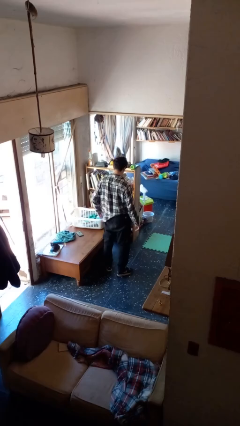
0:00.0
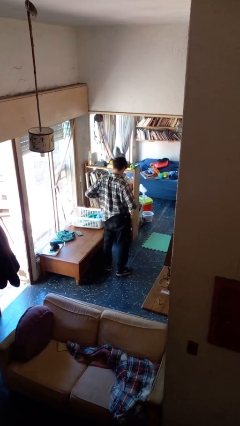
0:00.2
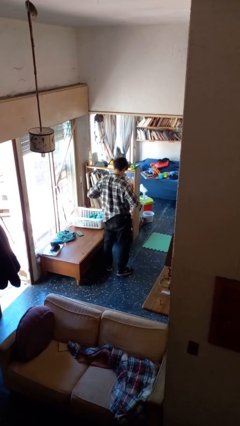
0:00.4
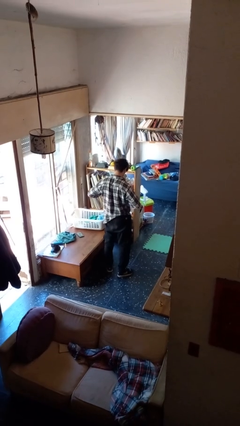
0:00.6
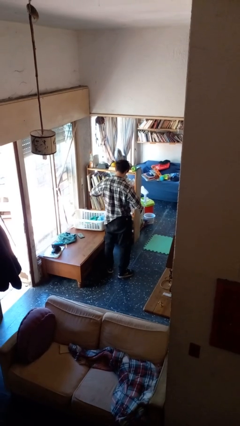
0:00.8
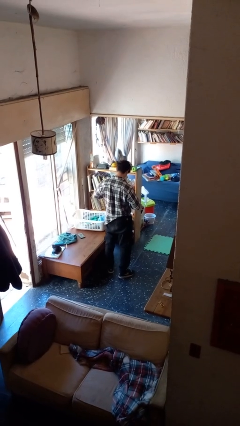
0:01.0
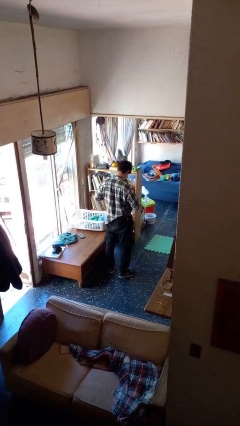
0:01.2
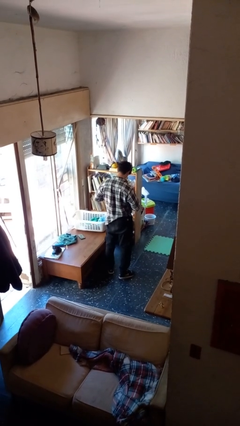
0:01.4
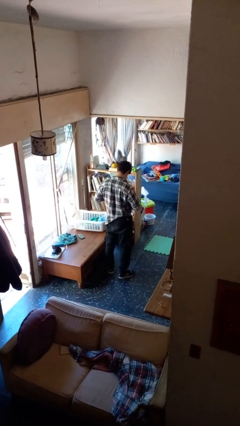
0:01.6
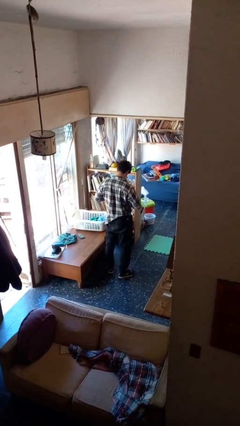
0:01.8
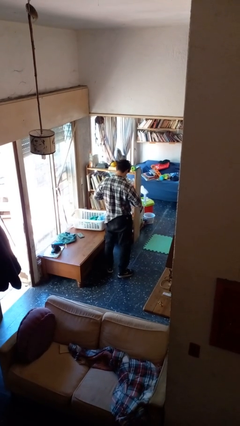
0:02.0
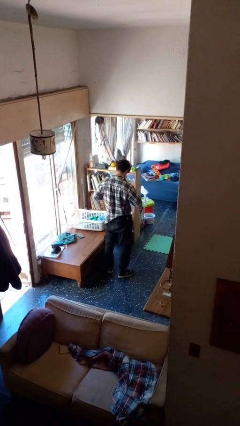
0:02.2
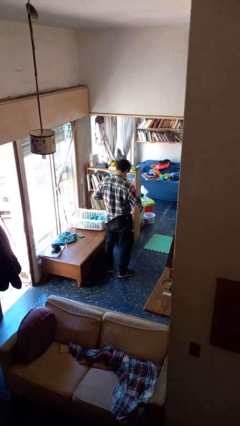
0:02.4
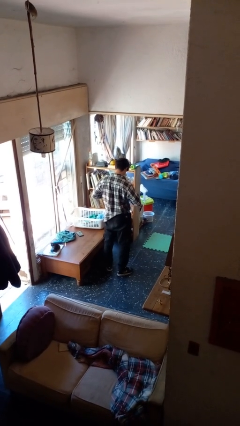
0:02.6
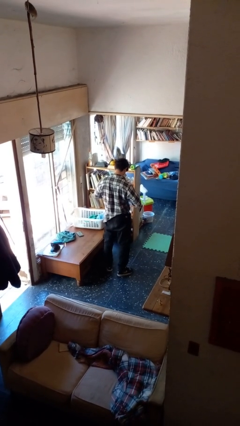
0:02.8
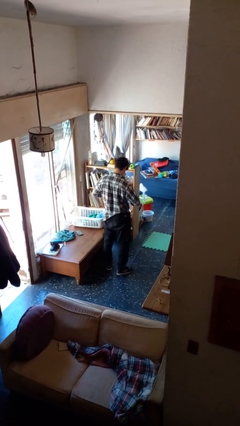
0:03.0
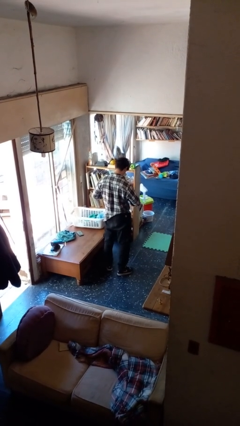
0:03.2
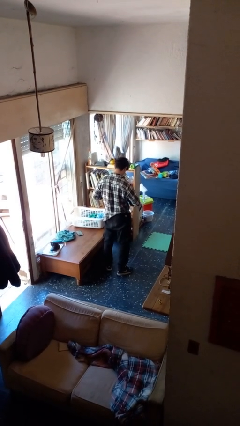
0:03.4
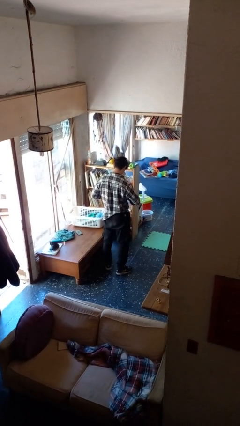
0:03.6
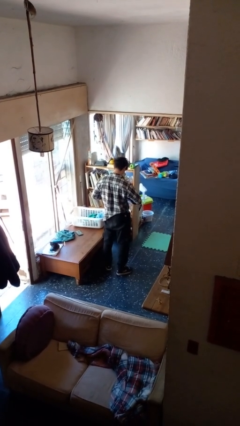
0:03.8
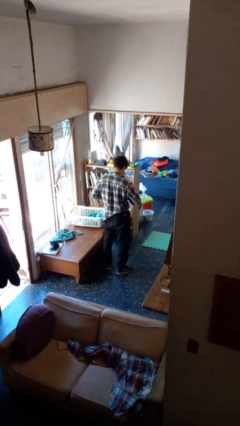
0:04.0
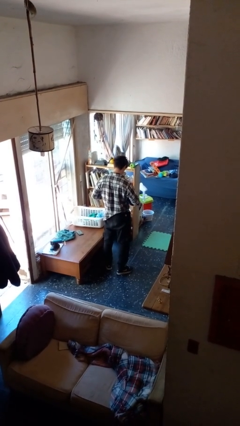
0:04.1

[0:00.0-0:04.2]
person buttons shirt

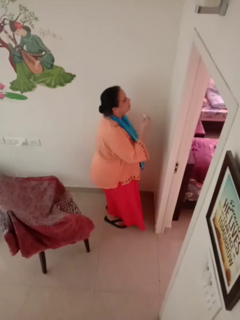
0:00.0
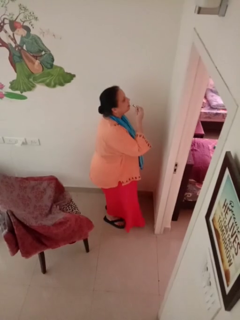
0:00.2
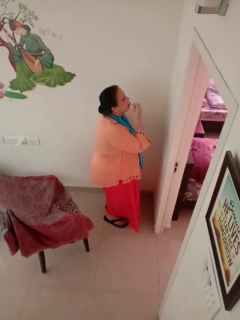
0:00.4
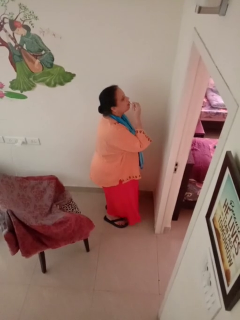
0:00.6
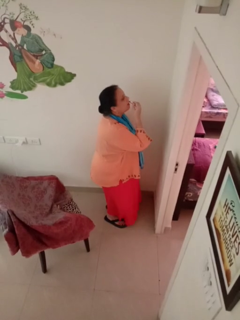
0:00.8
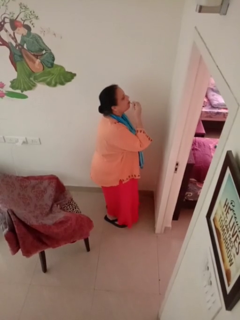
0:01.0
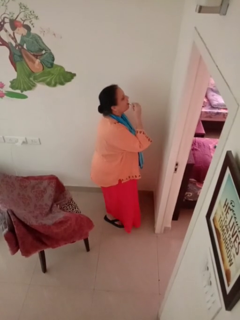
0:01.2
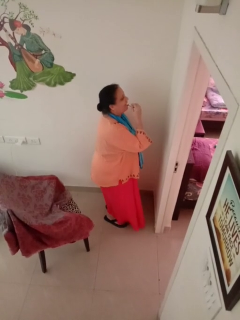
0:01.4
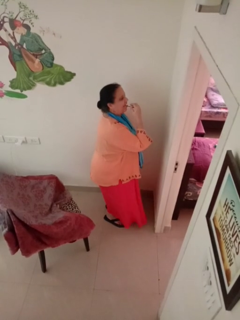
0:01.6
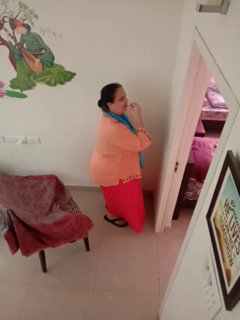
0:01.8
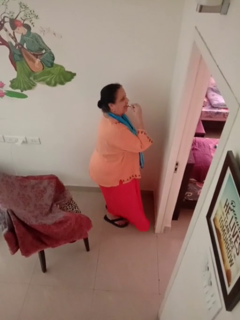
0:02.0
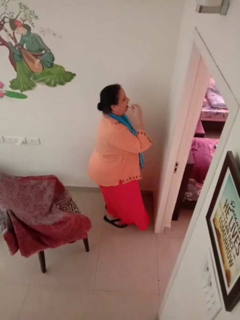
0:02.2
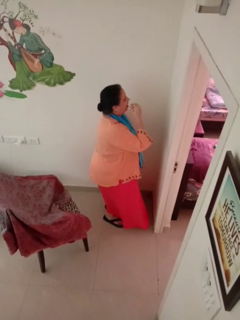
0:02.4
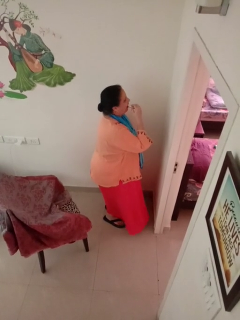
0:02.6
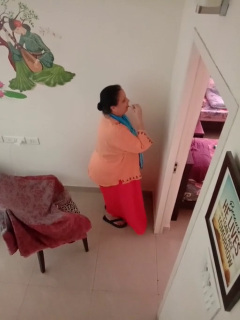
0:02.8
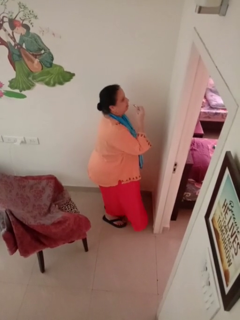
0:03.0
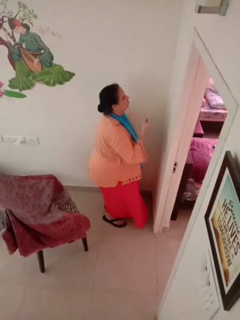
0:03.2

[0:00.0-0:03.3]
person applies lip makeup

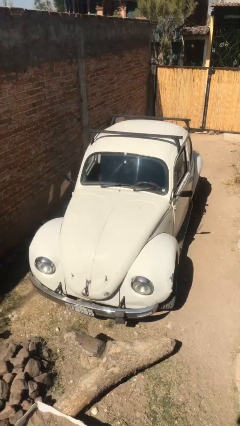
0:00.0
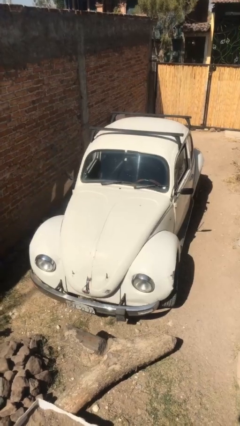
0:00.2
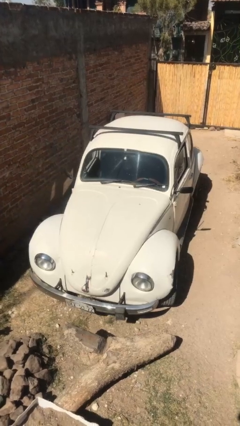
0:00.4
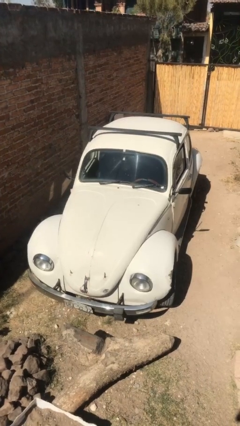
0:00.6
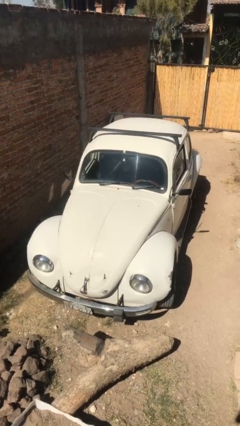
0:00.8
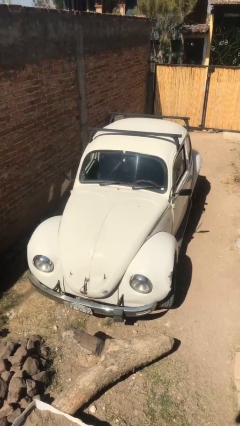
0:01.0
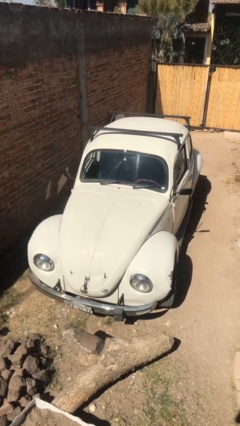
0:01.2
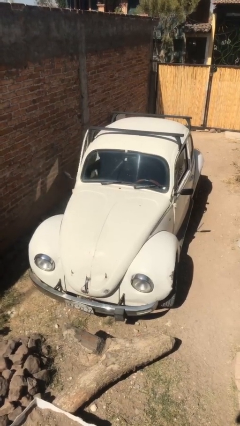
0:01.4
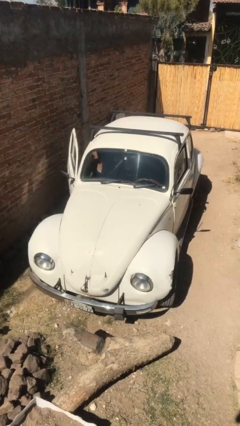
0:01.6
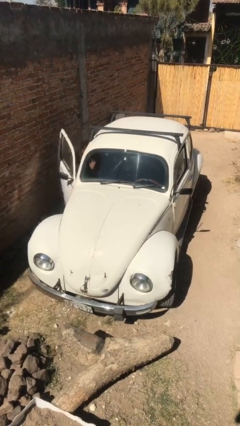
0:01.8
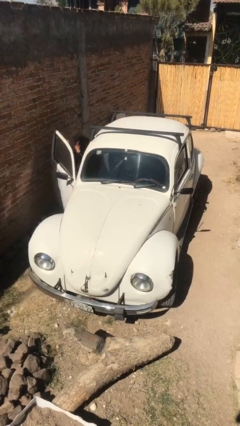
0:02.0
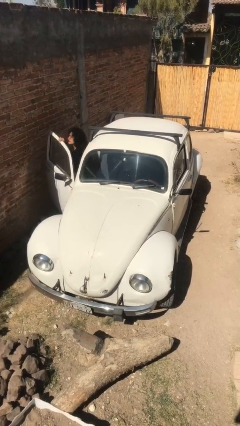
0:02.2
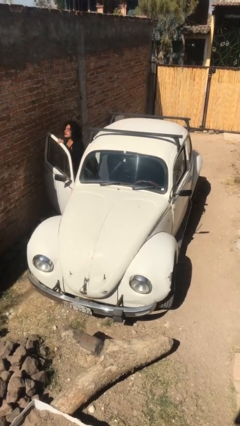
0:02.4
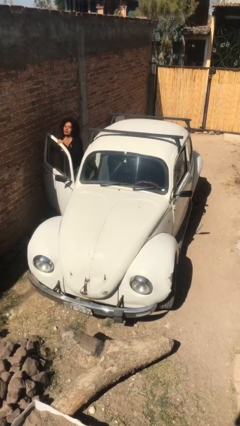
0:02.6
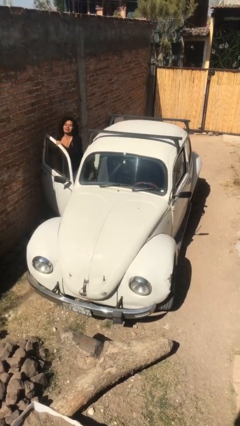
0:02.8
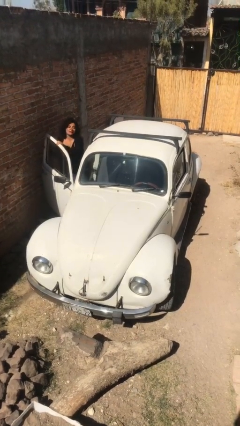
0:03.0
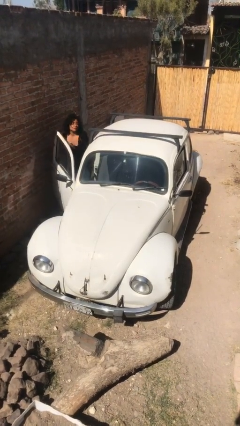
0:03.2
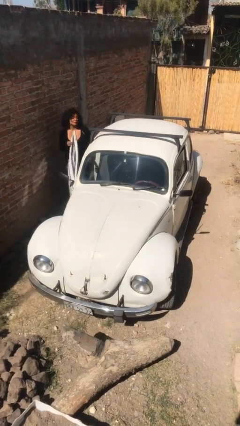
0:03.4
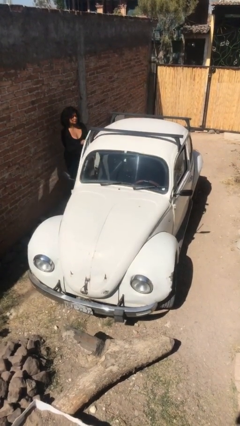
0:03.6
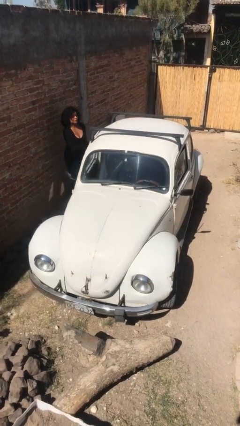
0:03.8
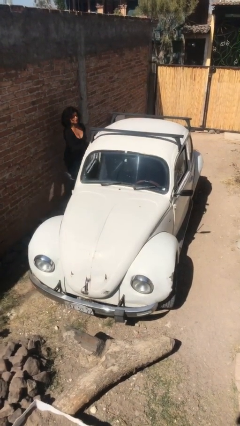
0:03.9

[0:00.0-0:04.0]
car drops off person

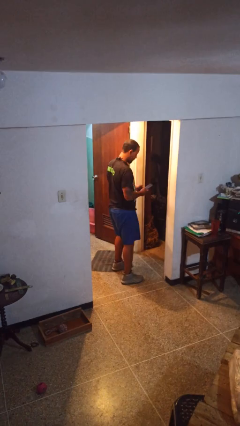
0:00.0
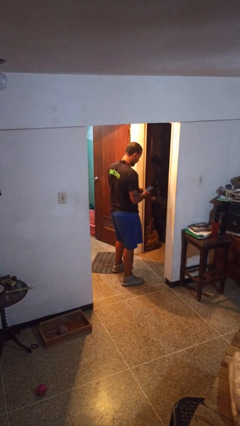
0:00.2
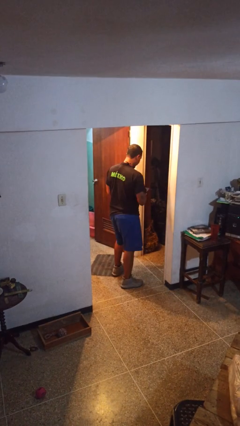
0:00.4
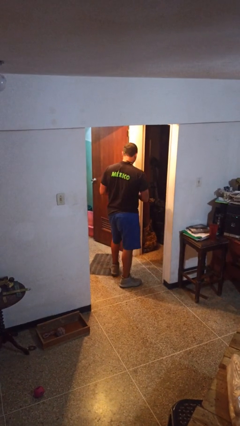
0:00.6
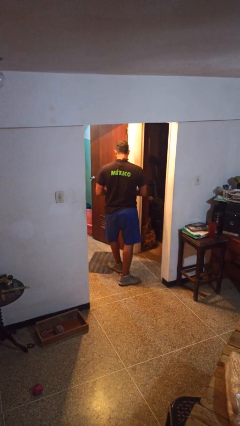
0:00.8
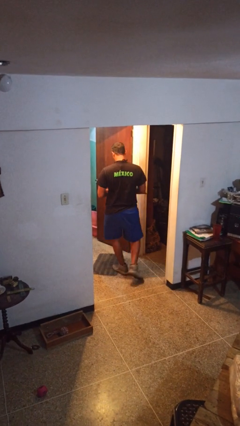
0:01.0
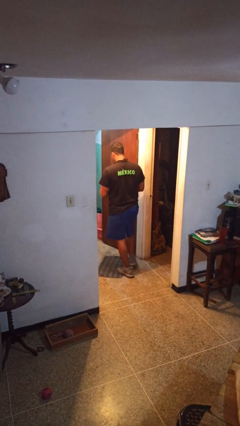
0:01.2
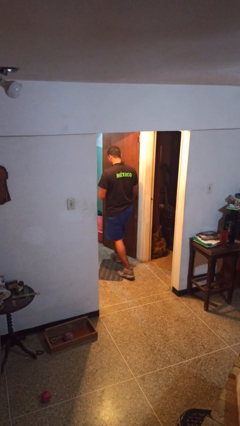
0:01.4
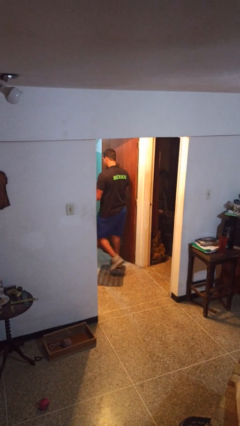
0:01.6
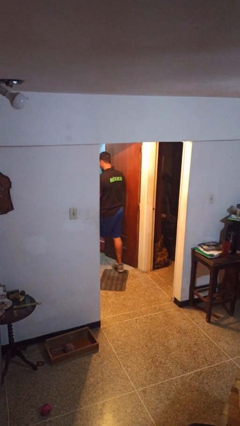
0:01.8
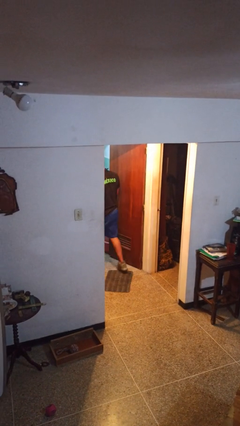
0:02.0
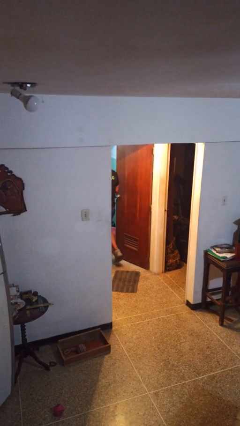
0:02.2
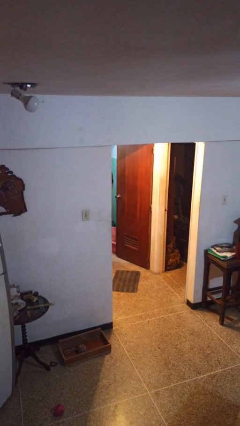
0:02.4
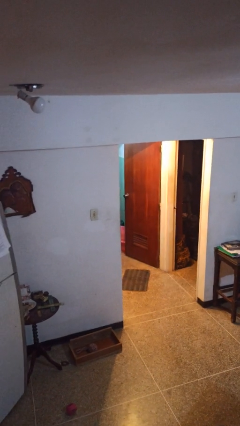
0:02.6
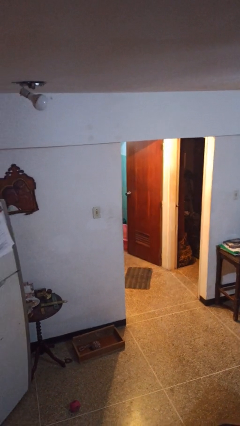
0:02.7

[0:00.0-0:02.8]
person exits scene through structure

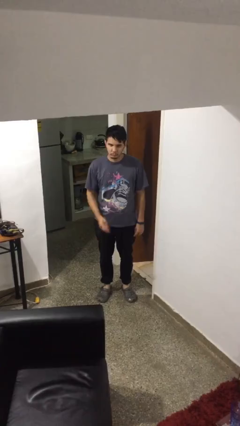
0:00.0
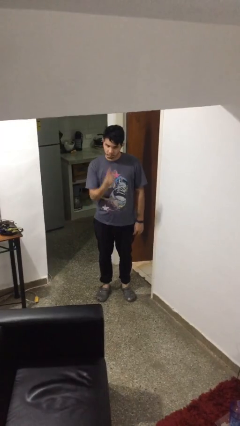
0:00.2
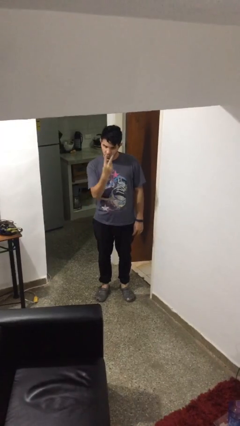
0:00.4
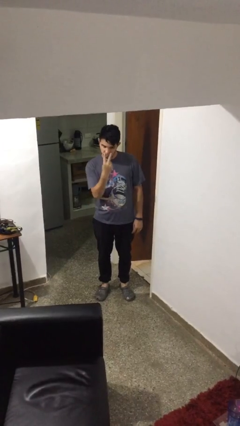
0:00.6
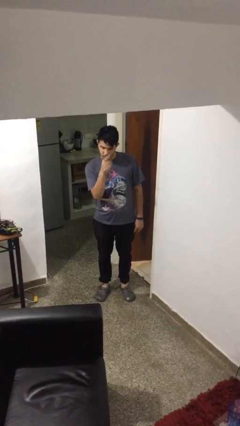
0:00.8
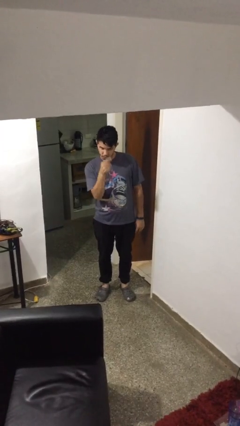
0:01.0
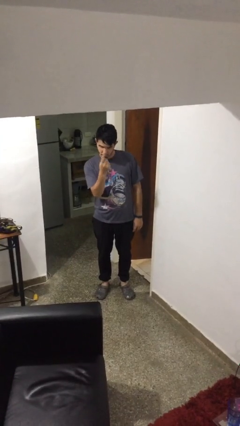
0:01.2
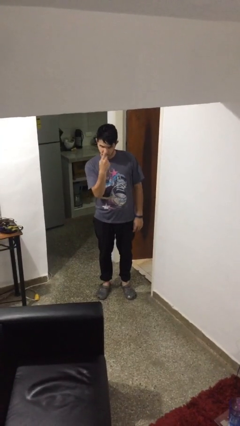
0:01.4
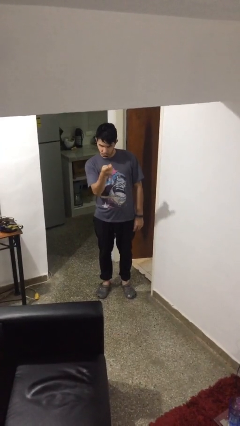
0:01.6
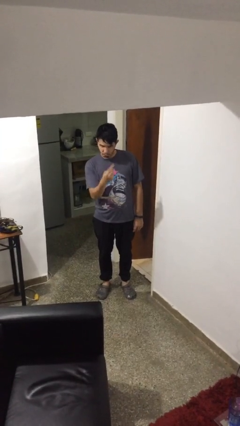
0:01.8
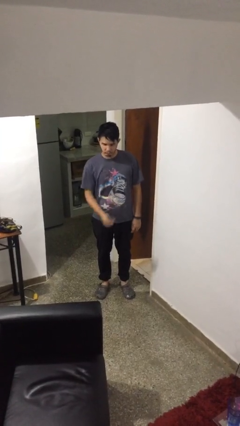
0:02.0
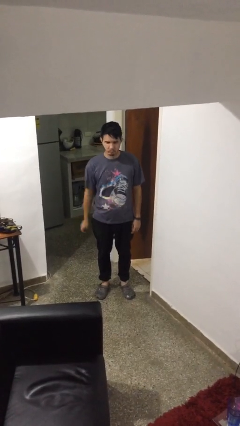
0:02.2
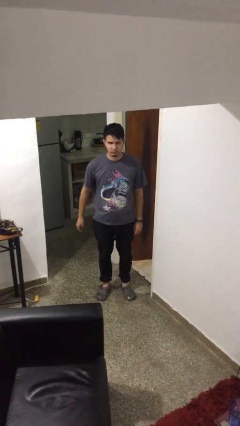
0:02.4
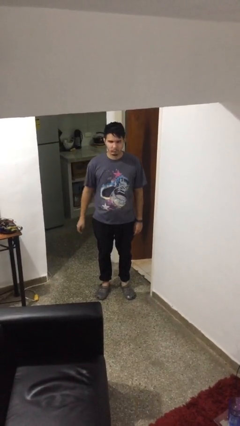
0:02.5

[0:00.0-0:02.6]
person gestures watch closely

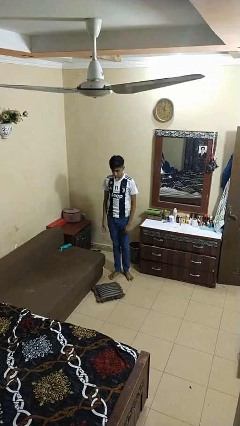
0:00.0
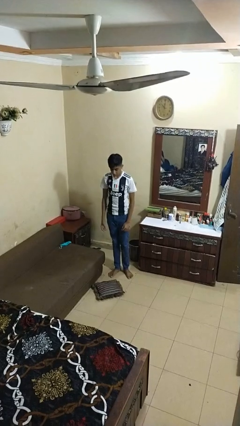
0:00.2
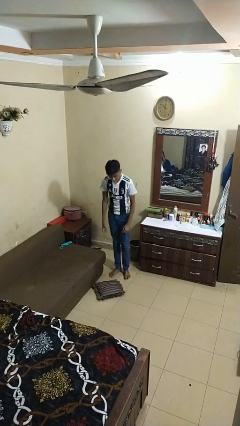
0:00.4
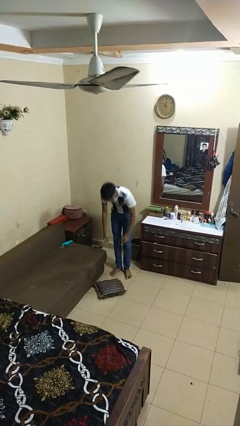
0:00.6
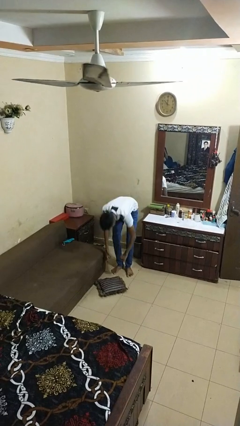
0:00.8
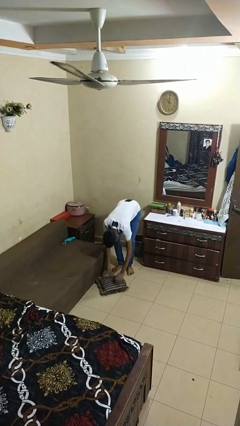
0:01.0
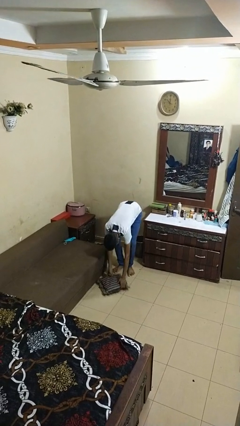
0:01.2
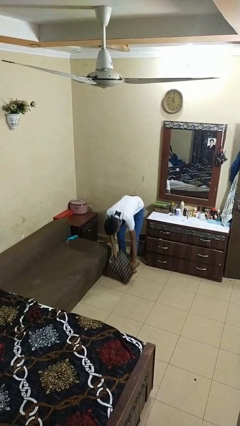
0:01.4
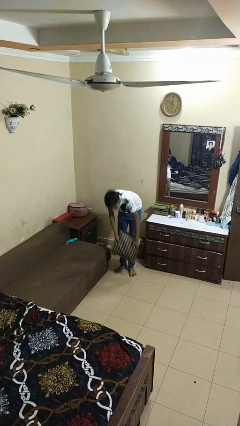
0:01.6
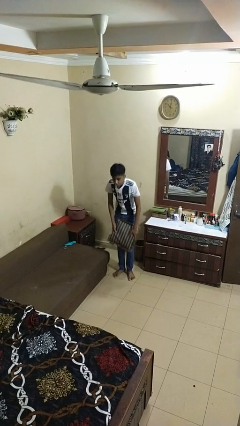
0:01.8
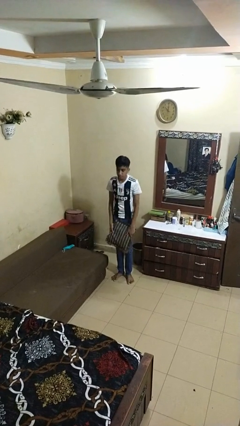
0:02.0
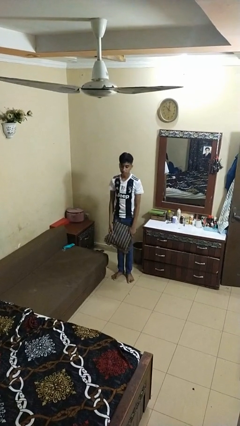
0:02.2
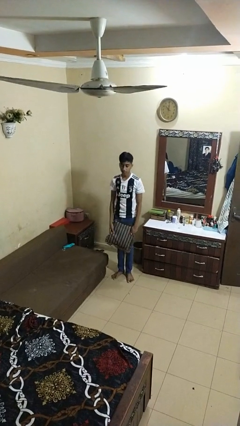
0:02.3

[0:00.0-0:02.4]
person picks up object from floor
